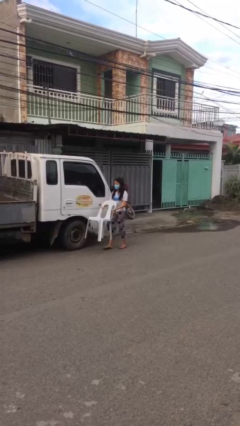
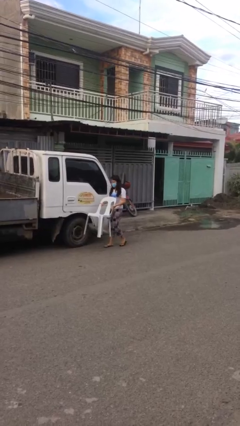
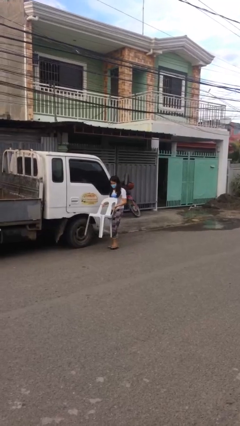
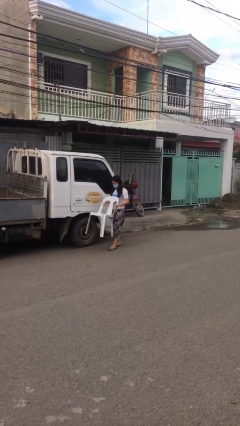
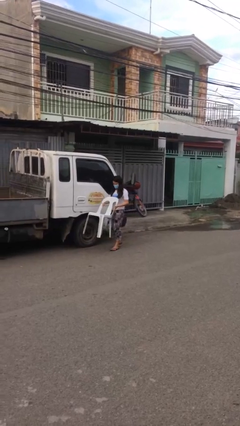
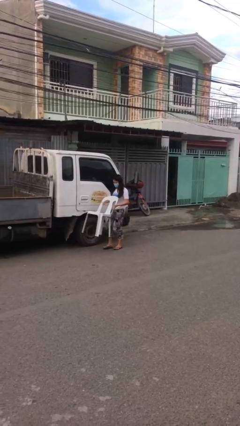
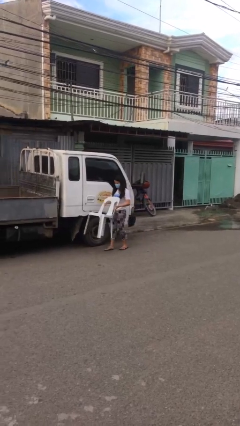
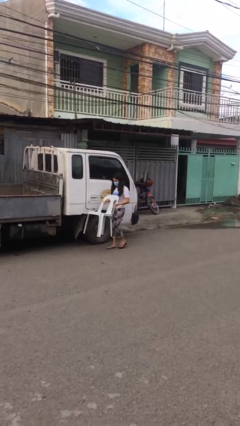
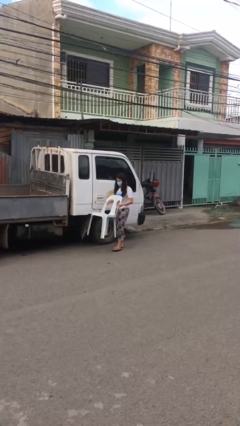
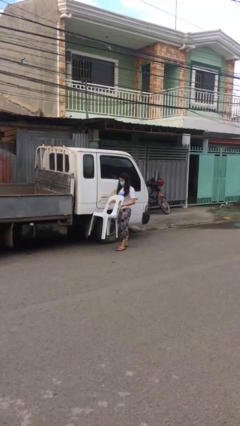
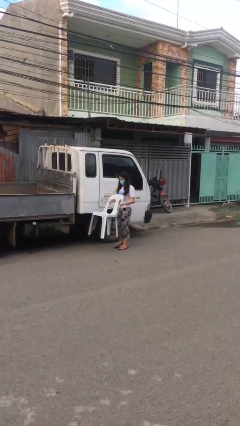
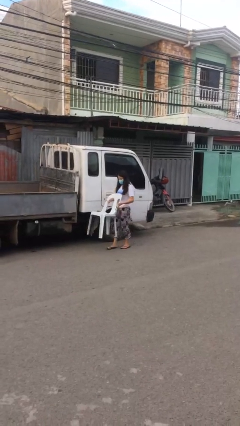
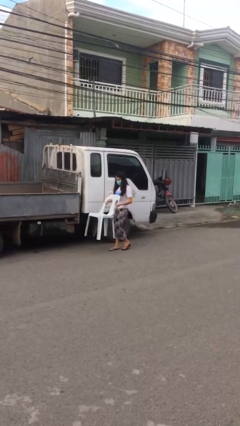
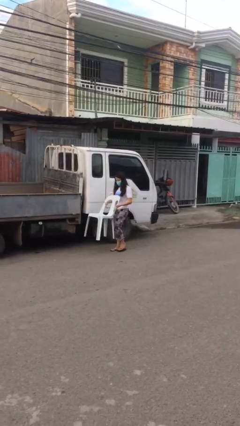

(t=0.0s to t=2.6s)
person carries heavy object

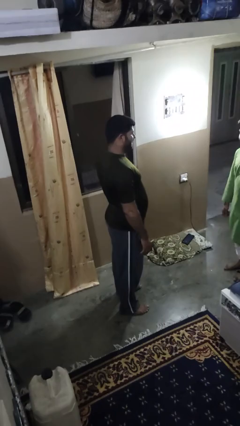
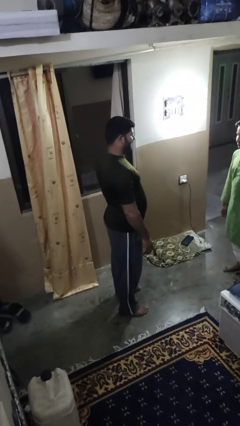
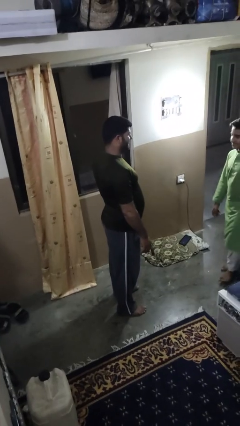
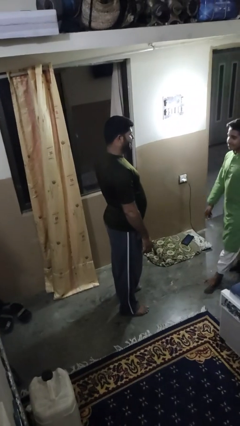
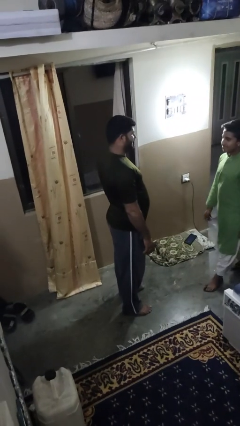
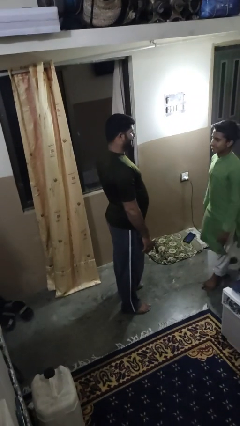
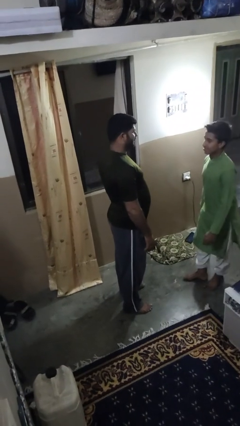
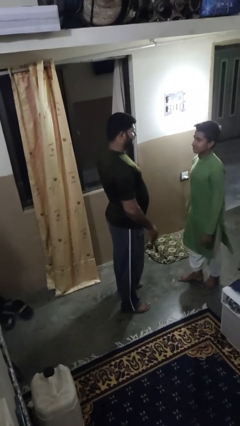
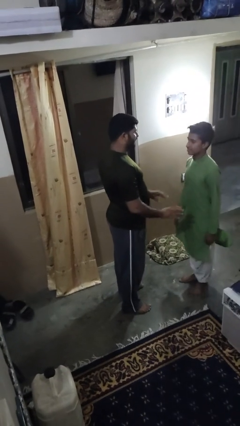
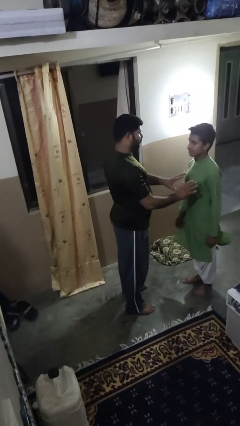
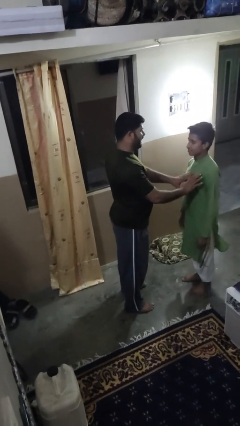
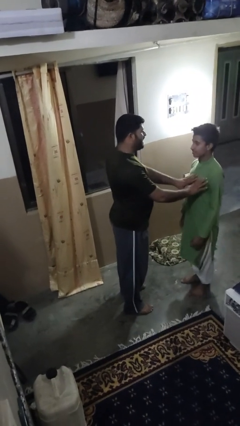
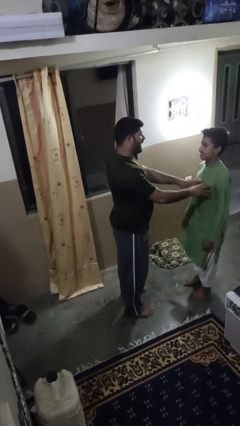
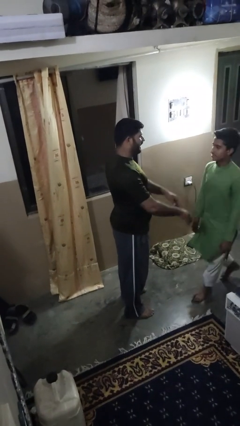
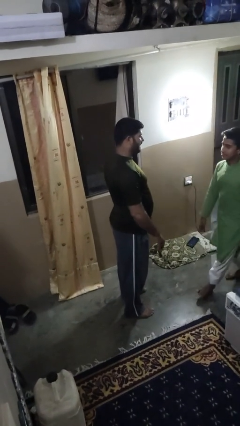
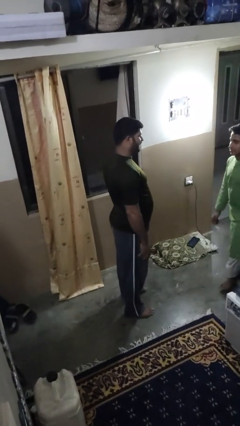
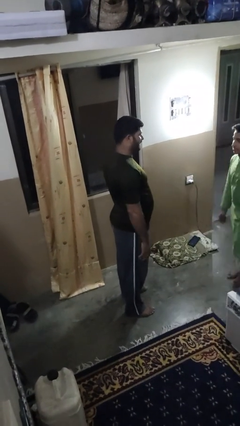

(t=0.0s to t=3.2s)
person shoves person

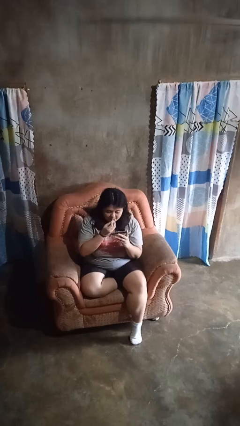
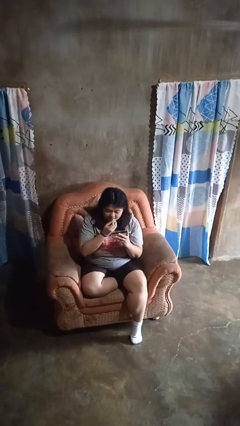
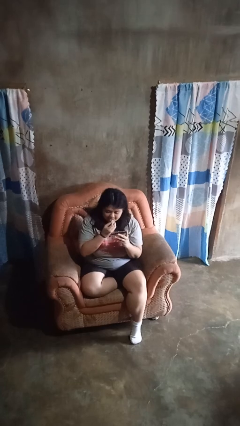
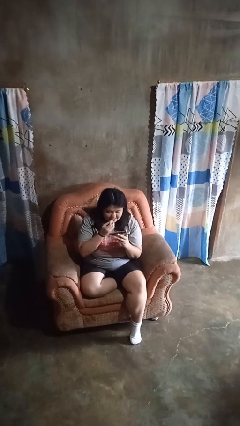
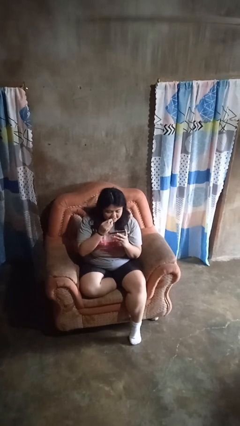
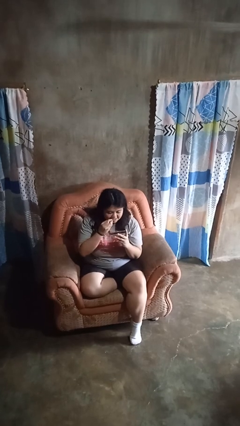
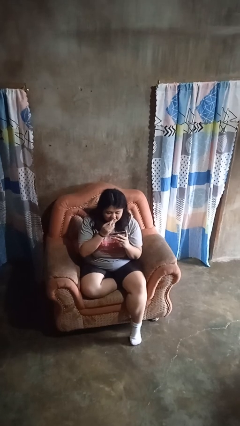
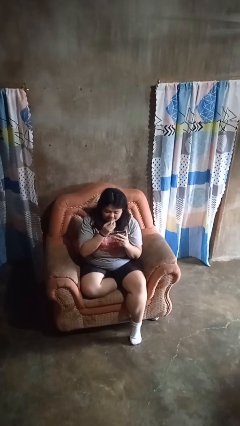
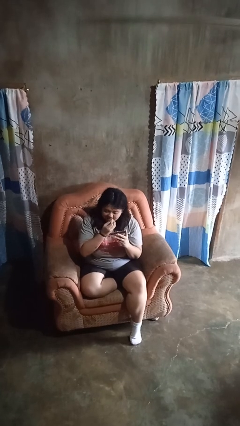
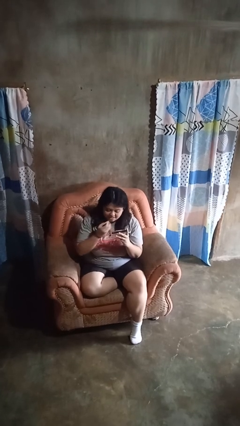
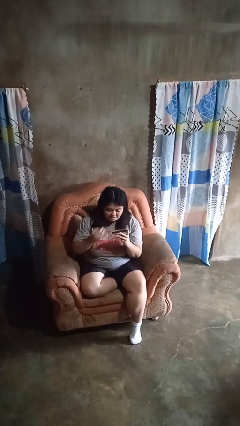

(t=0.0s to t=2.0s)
person applies lip makeup

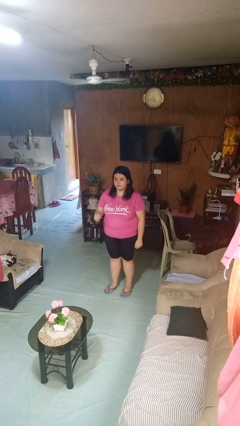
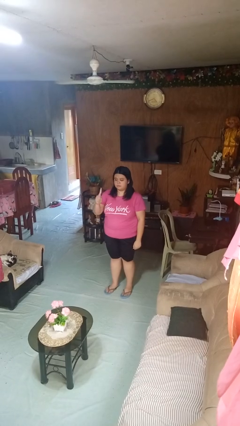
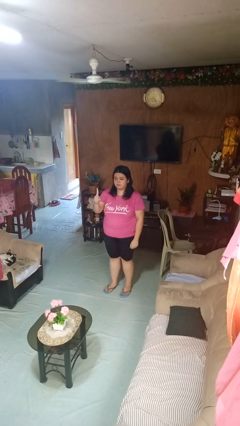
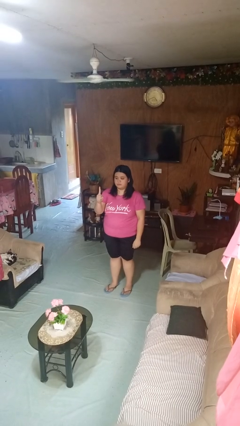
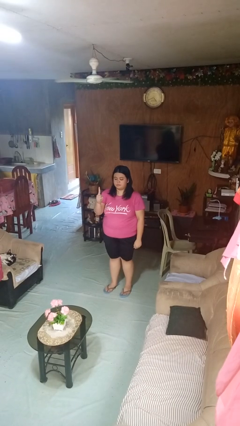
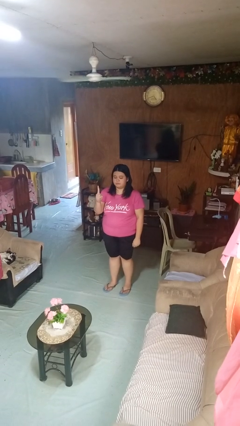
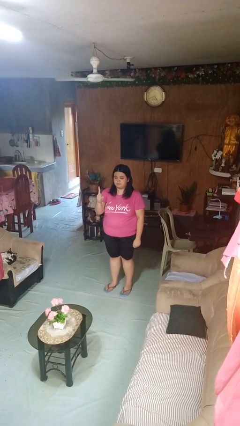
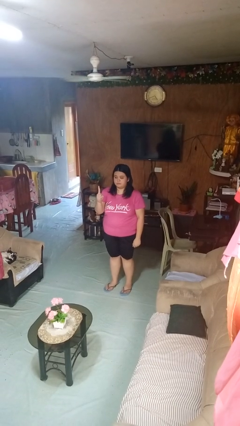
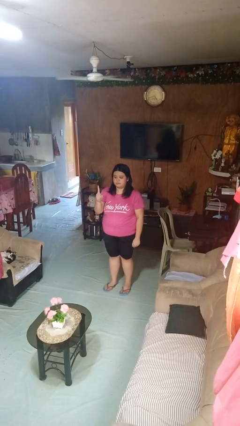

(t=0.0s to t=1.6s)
person gestures number one

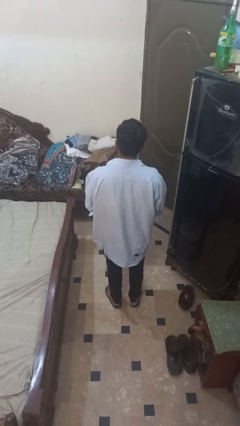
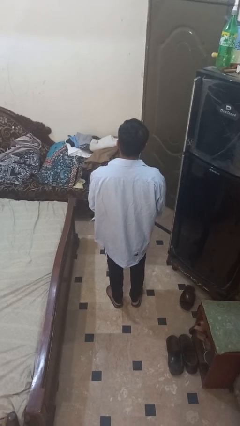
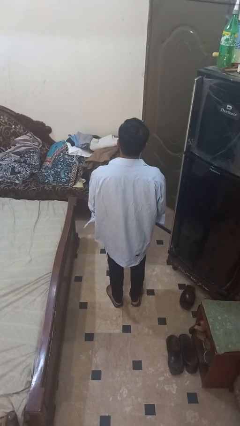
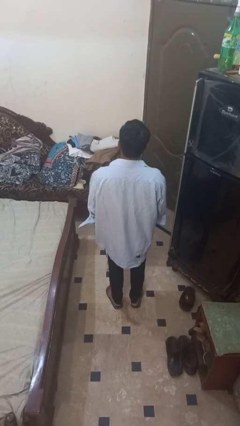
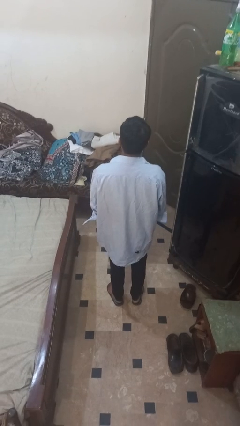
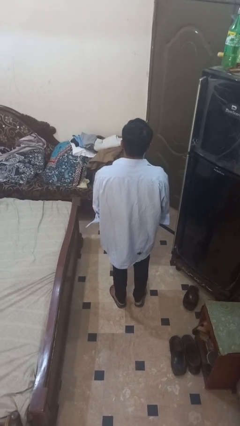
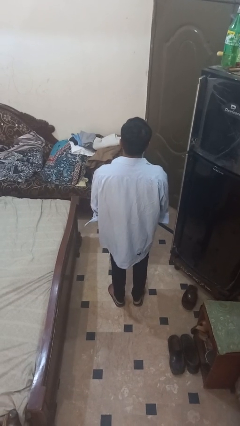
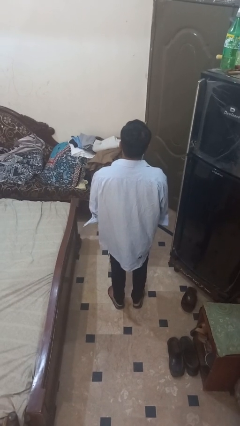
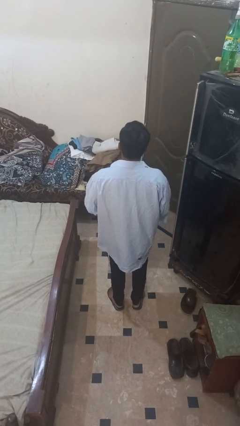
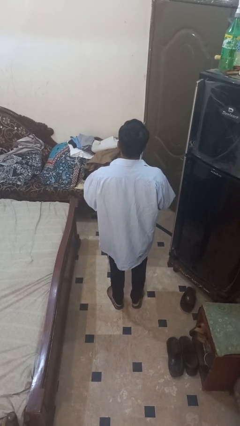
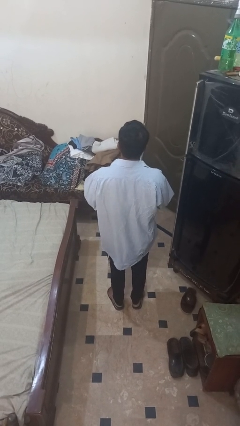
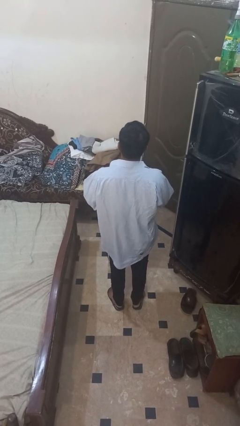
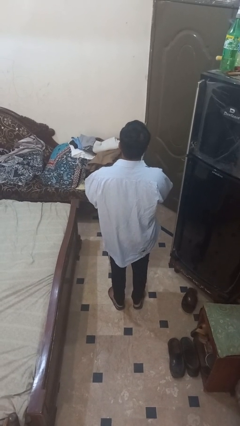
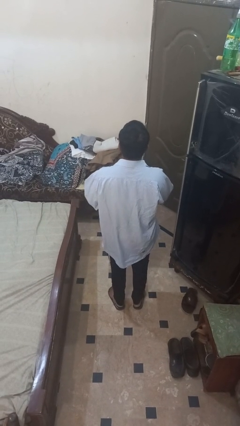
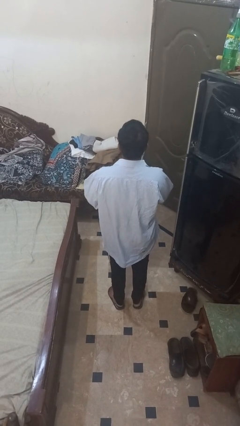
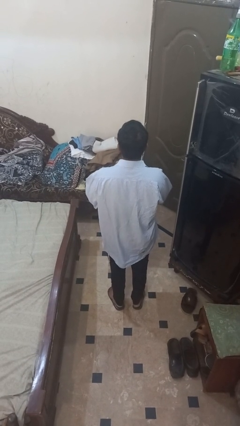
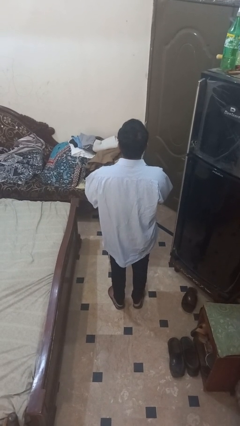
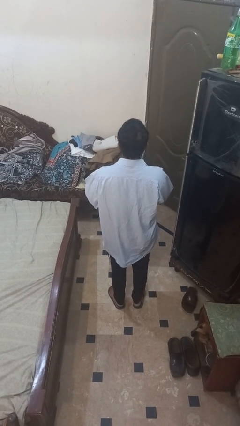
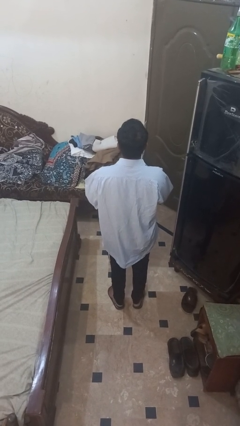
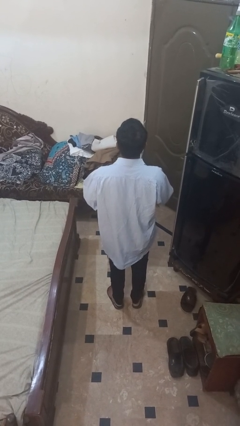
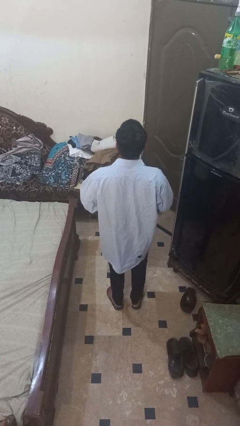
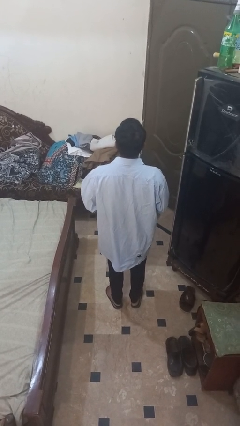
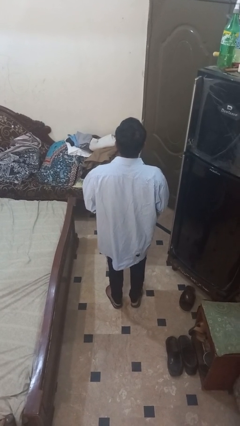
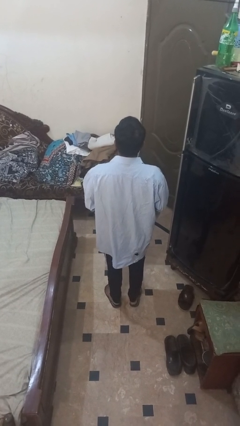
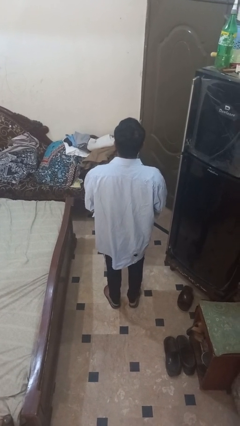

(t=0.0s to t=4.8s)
person buttons shirt

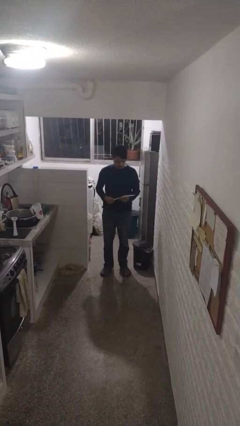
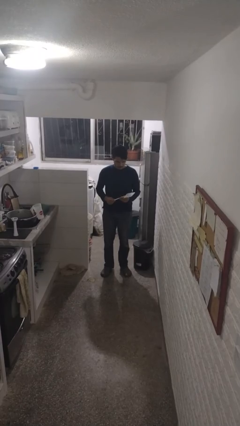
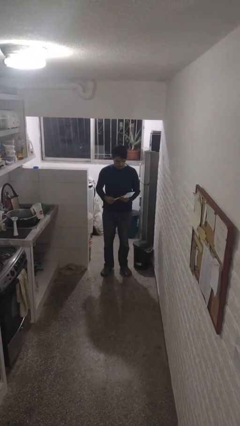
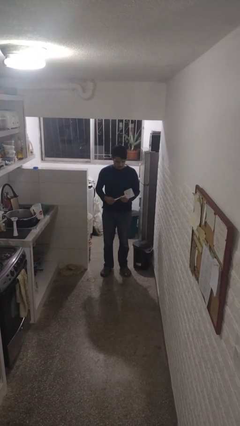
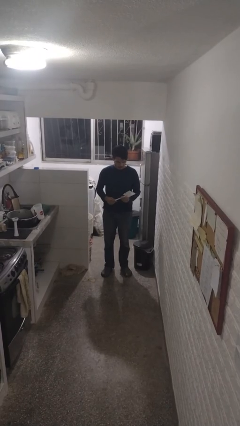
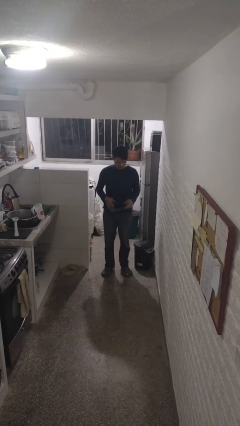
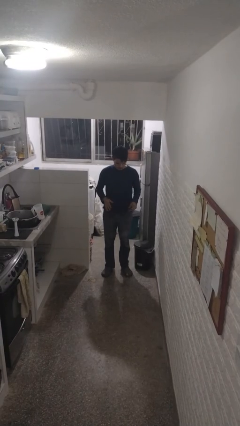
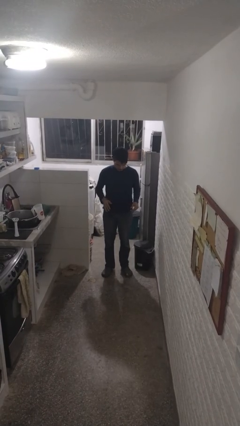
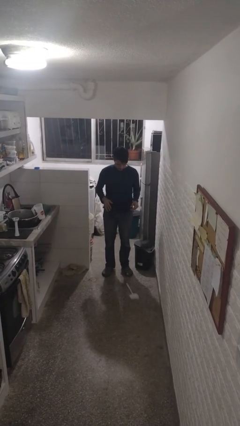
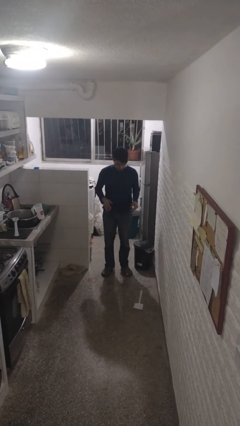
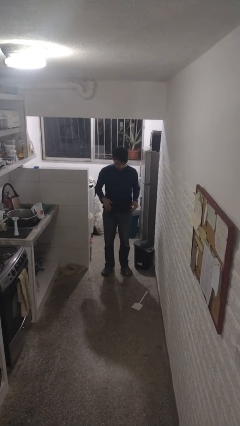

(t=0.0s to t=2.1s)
person drops object

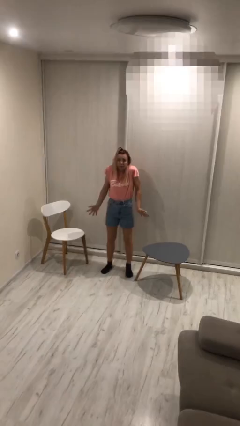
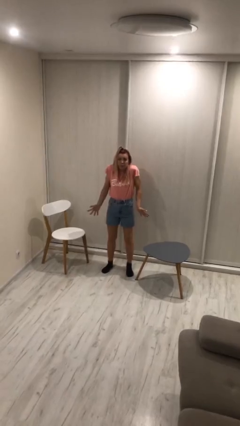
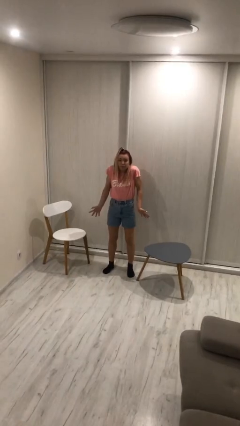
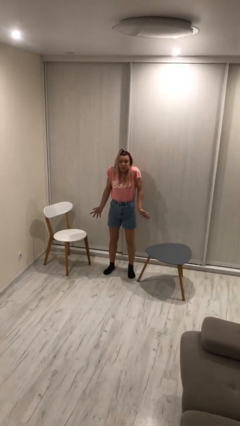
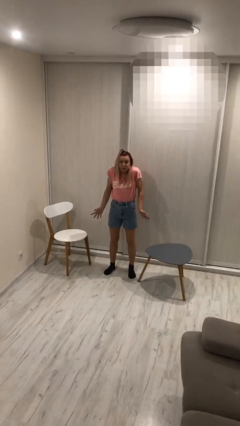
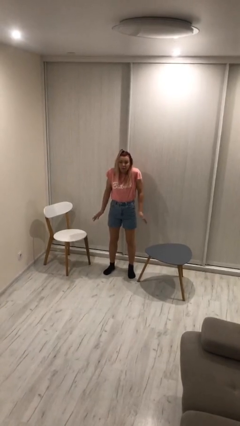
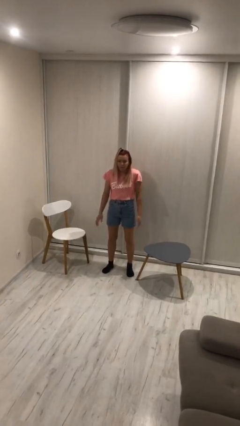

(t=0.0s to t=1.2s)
person shrugs
